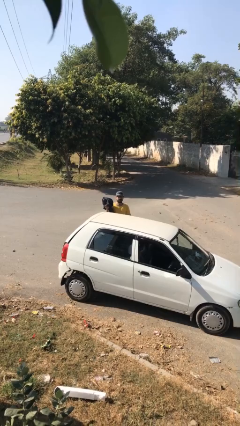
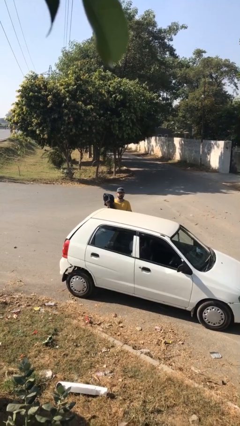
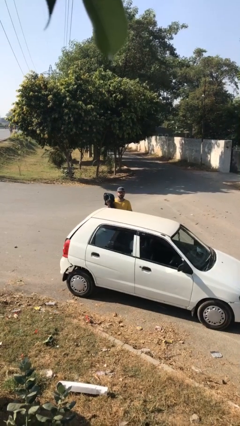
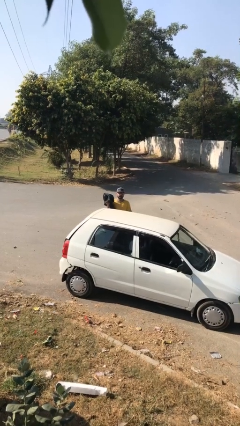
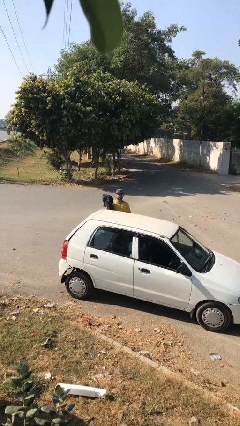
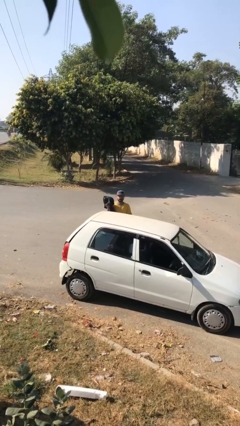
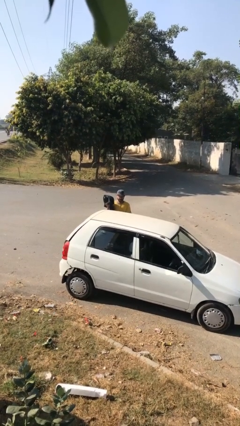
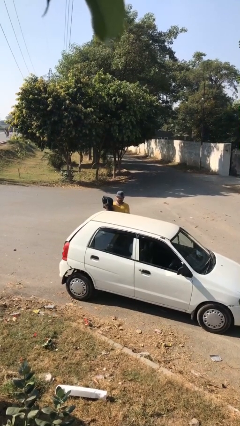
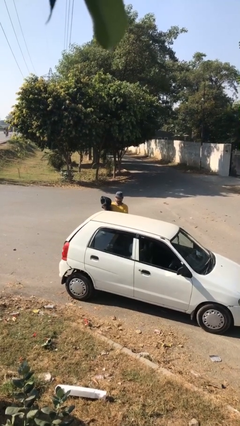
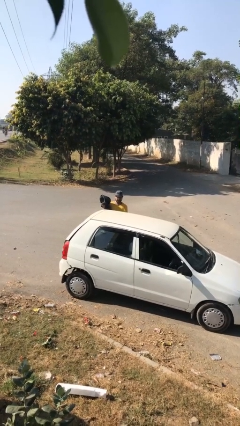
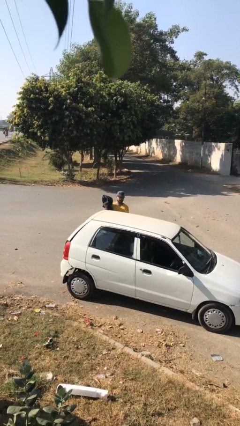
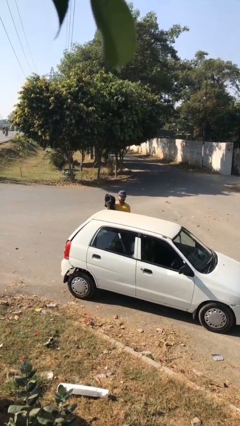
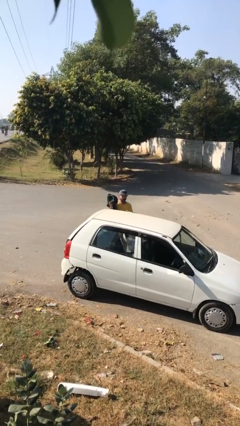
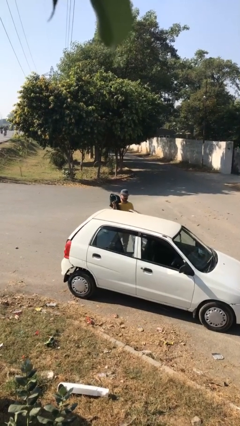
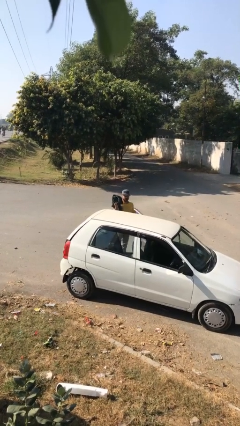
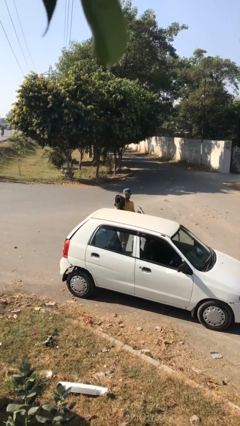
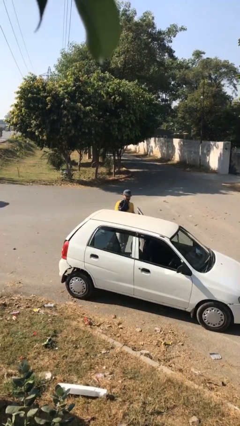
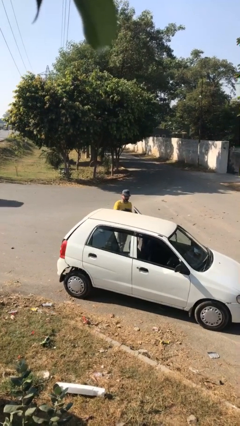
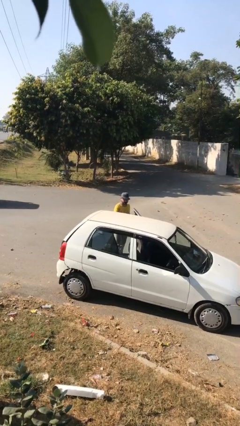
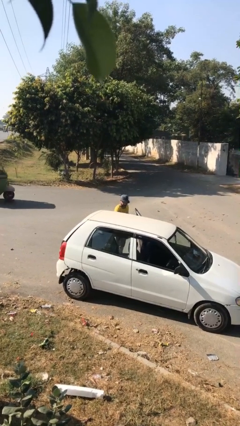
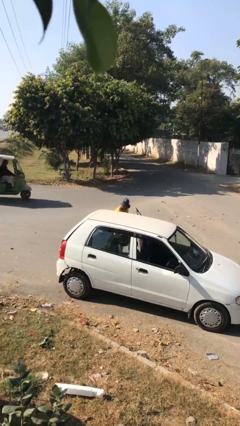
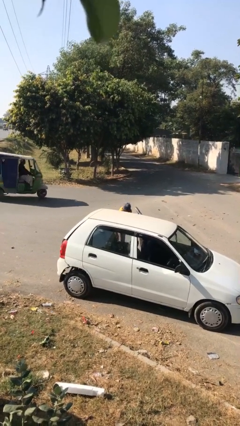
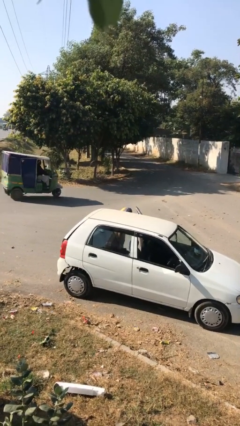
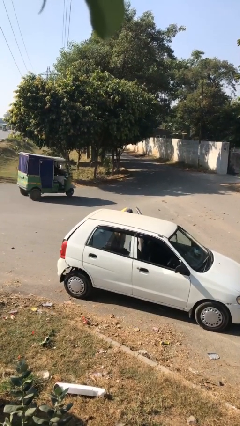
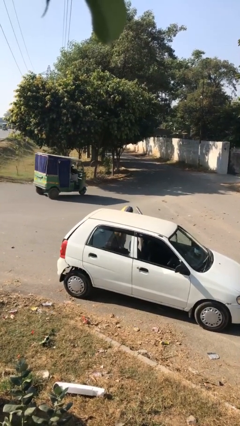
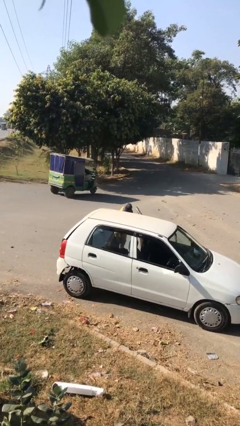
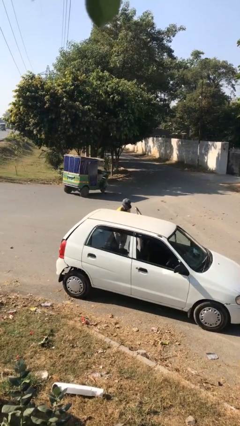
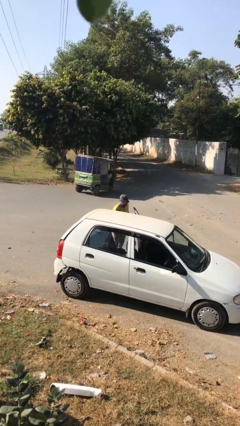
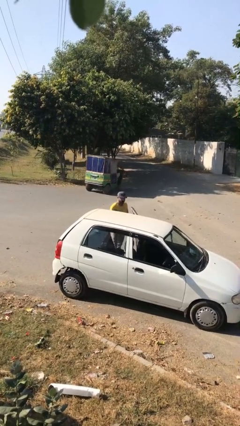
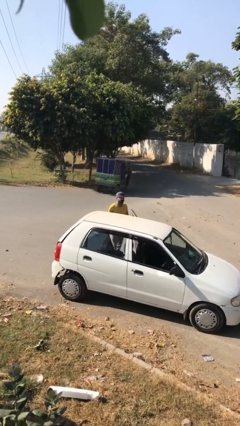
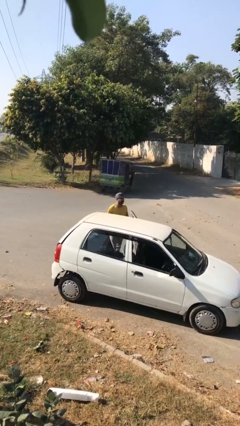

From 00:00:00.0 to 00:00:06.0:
person loads car

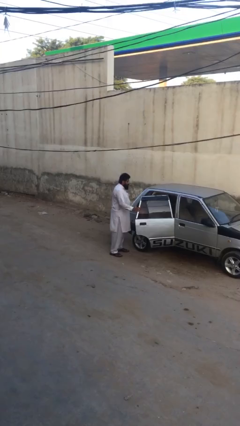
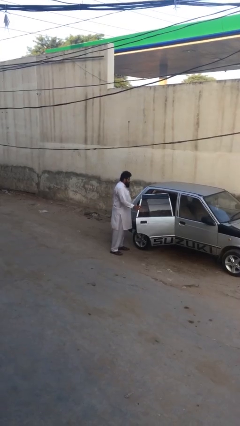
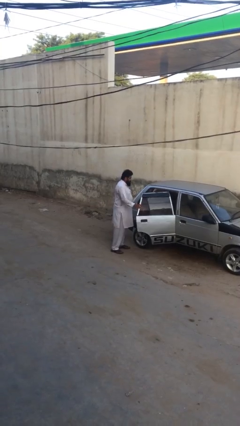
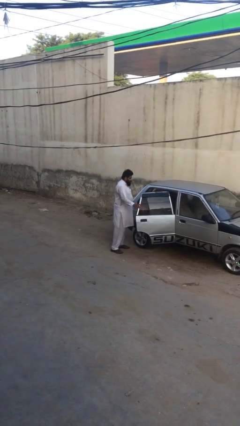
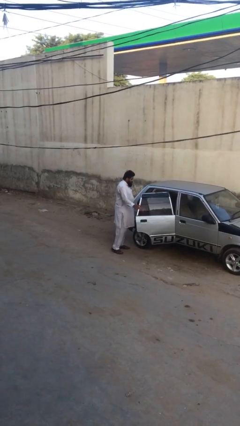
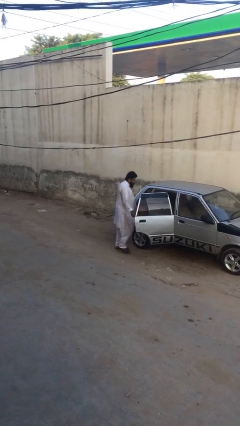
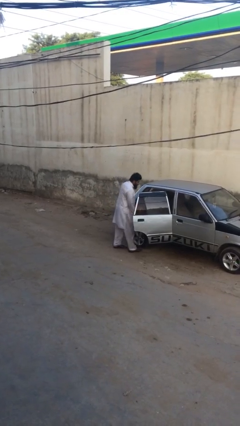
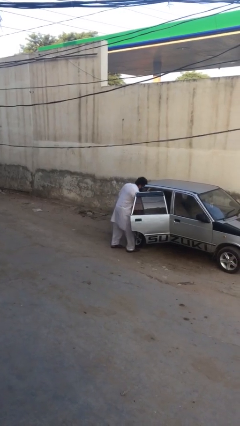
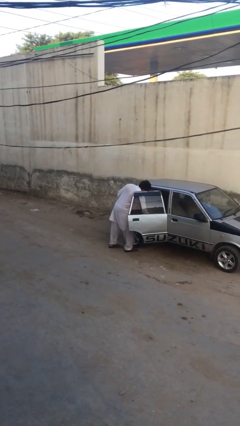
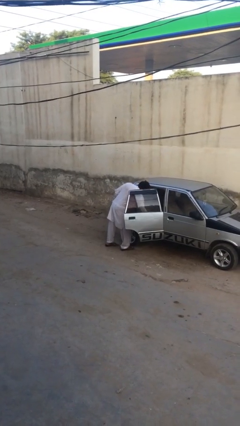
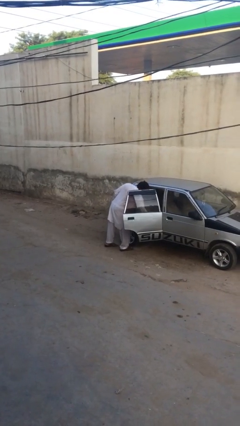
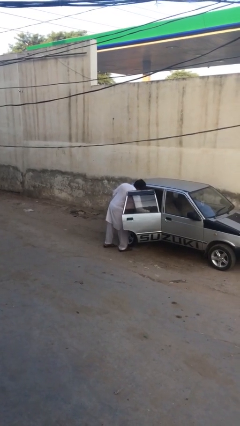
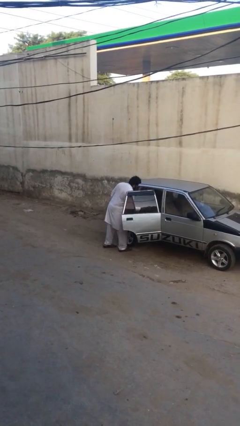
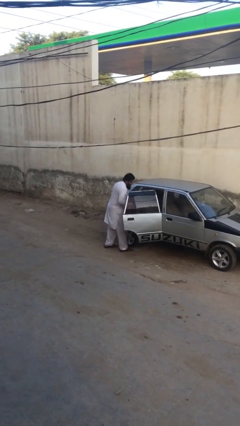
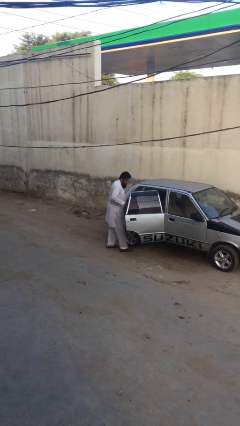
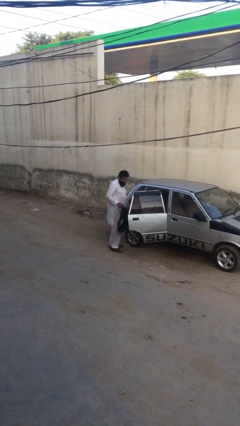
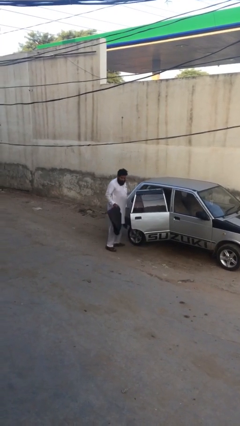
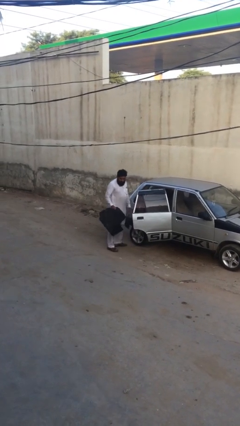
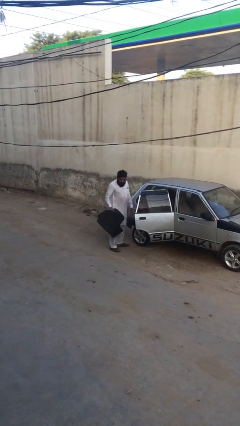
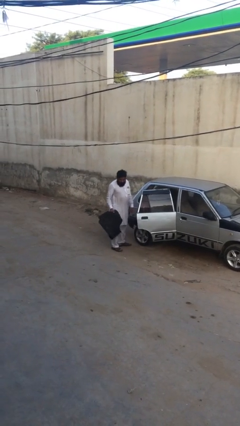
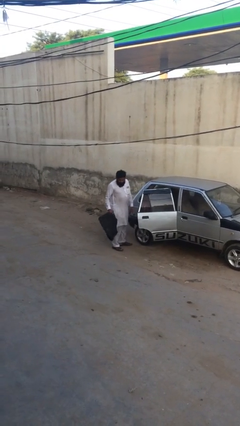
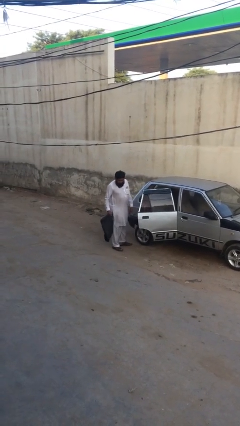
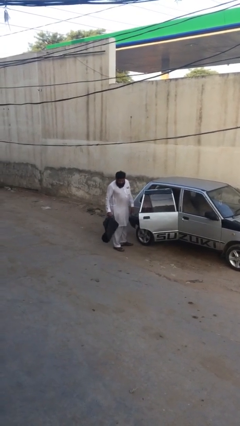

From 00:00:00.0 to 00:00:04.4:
person unloads car

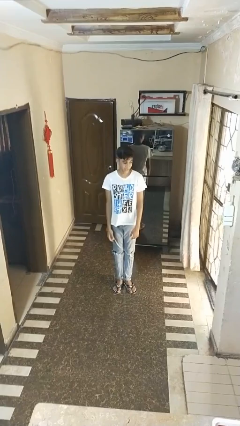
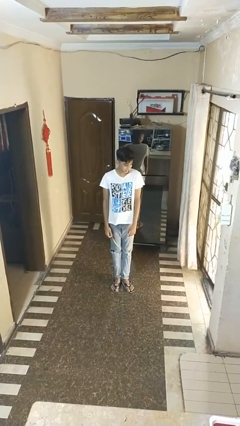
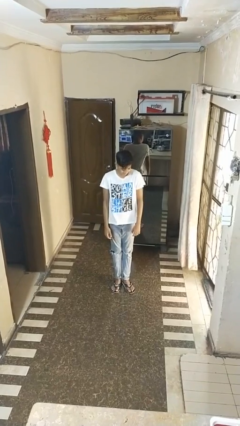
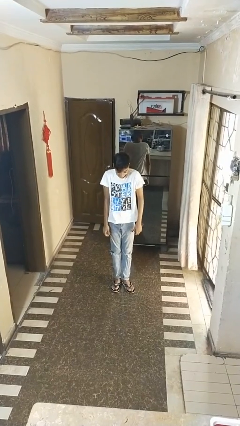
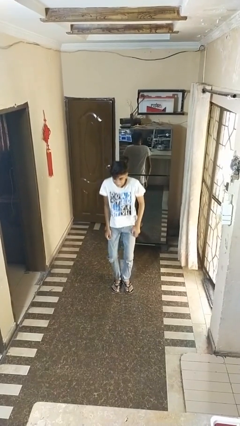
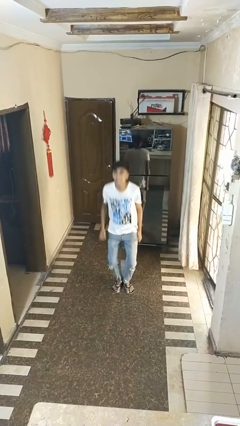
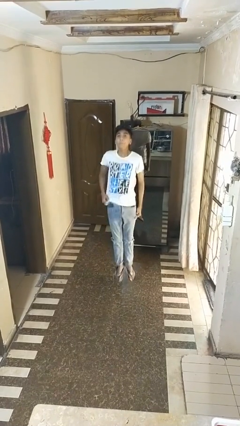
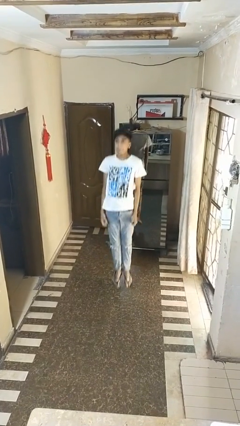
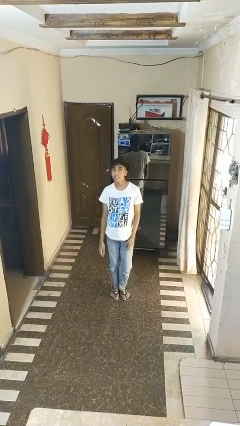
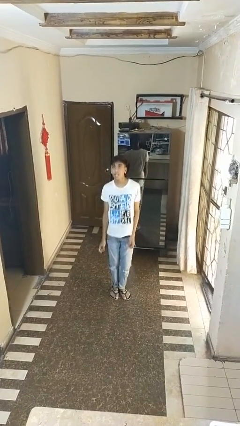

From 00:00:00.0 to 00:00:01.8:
person jumps

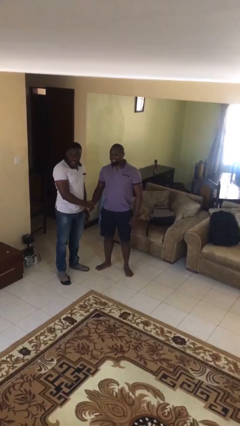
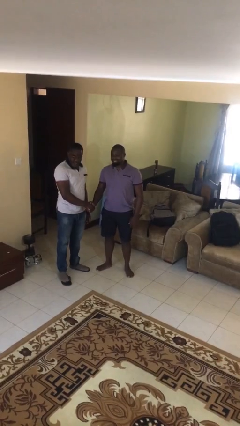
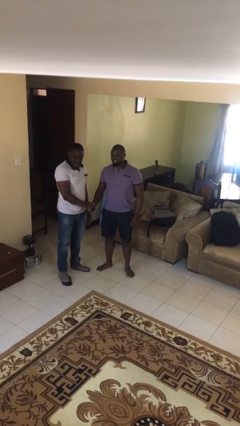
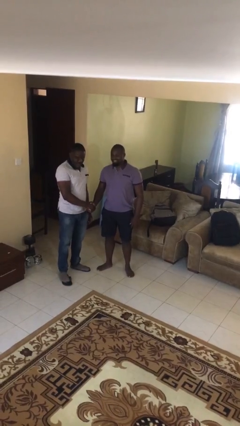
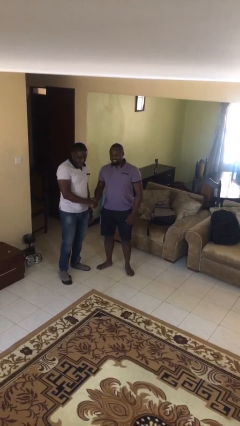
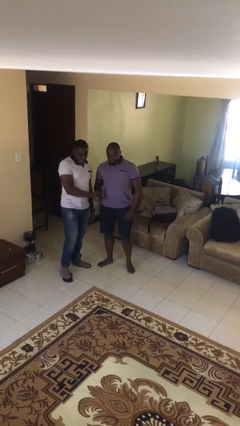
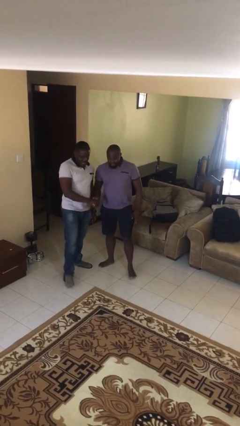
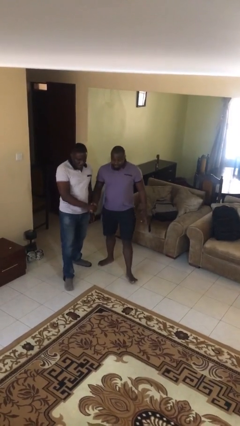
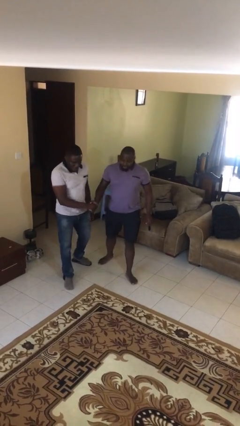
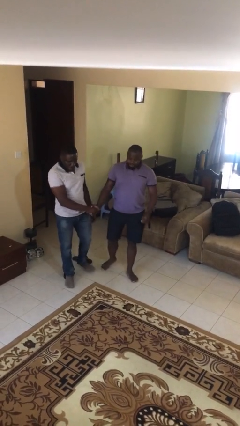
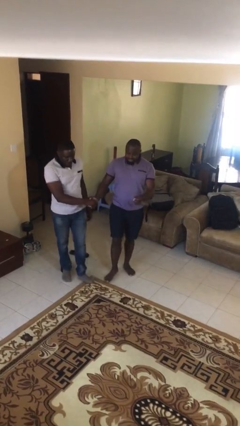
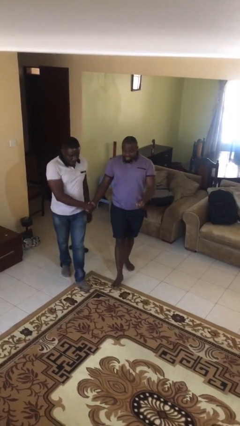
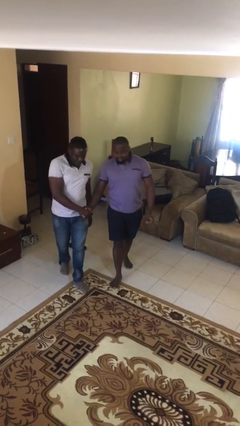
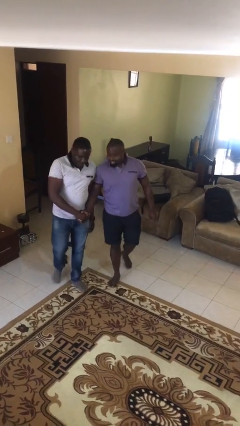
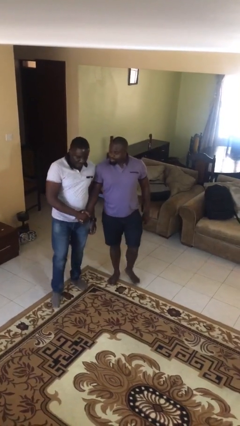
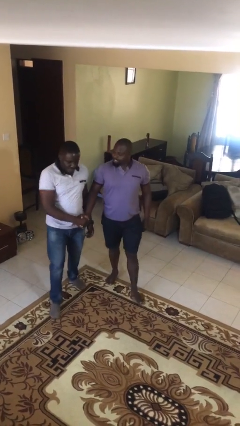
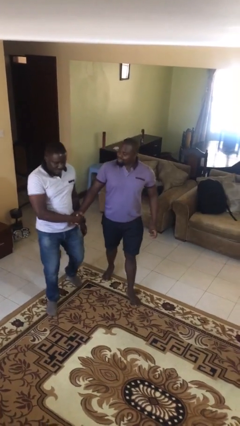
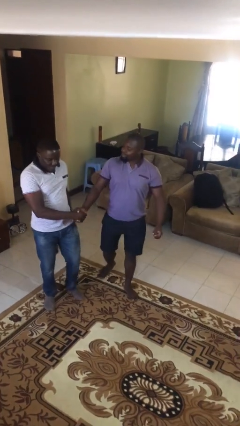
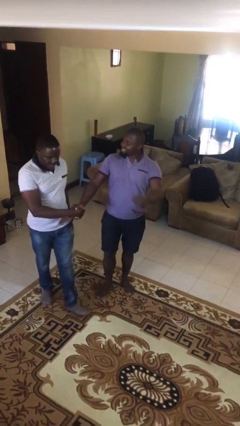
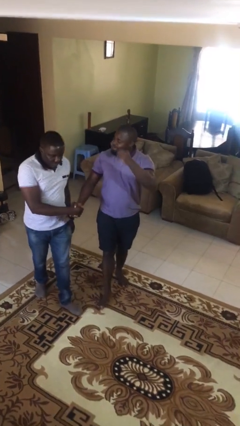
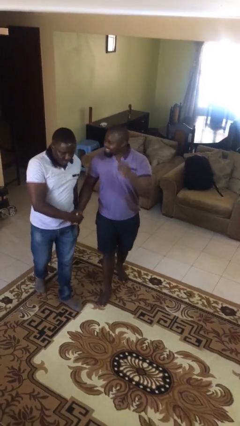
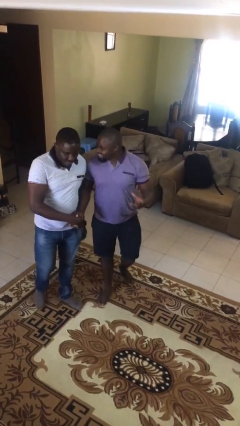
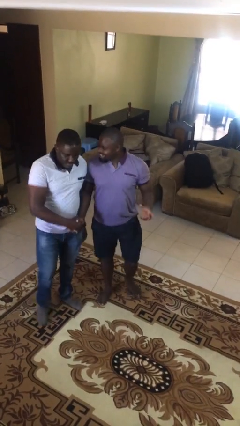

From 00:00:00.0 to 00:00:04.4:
person holds hand

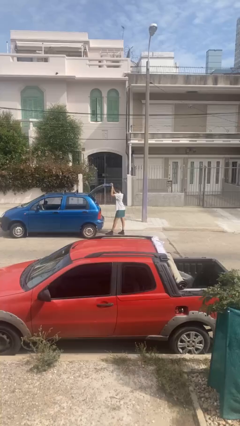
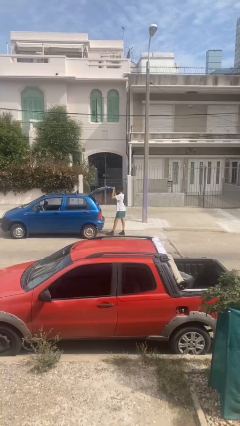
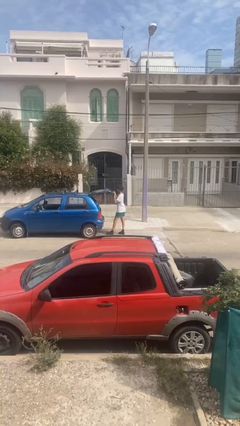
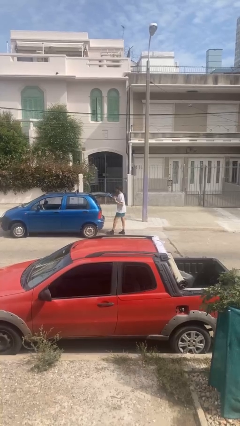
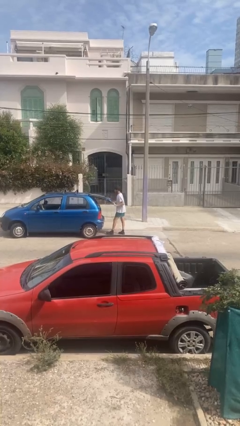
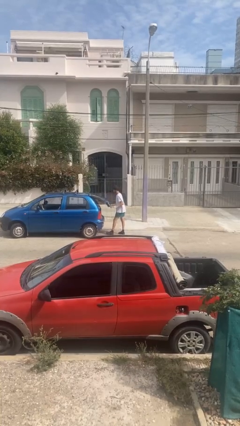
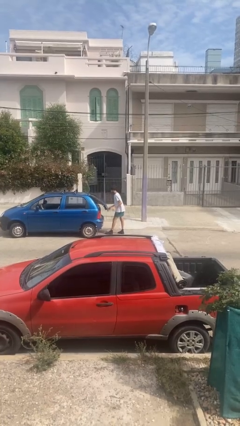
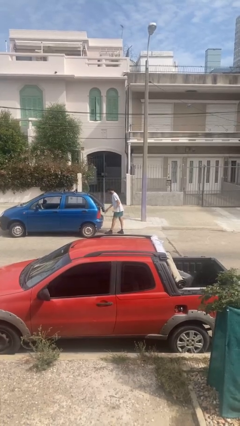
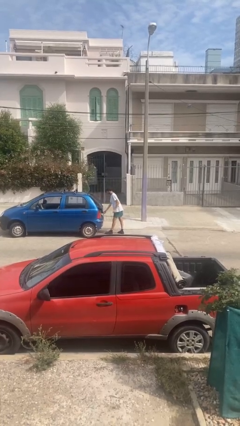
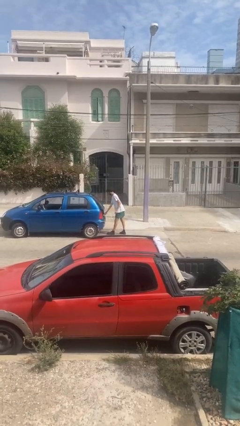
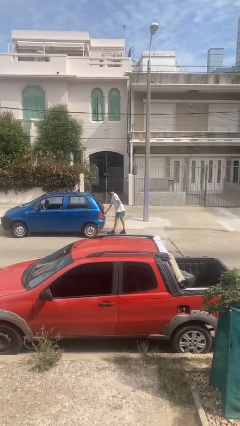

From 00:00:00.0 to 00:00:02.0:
person closes car trunk
